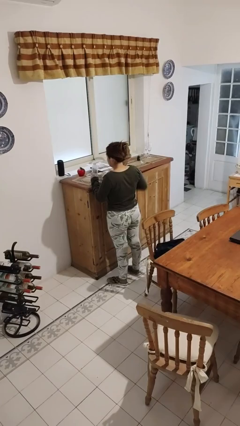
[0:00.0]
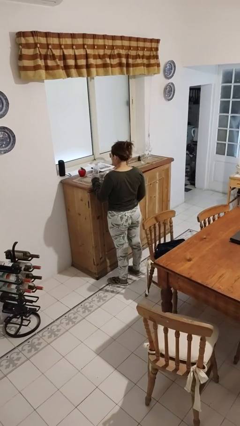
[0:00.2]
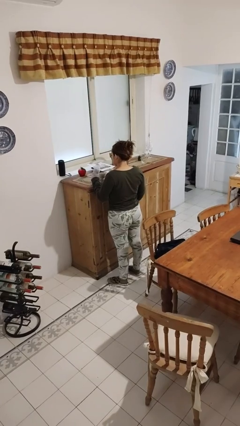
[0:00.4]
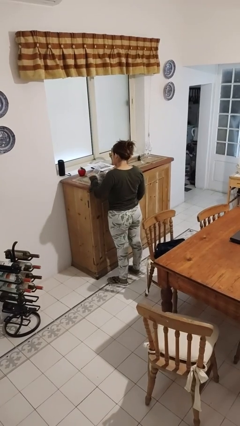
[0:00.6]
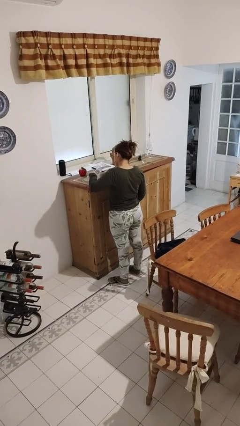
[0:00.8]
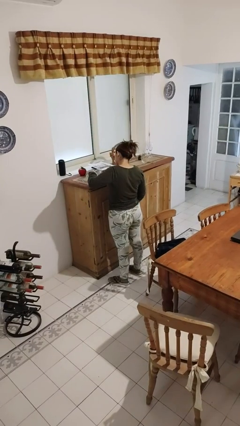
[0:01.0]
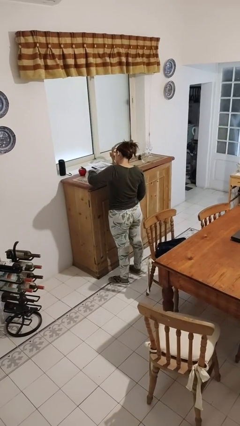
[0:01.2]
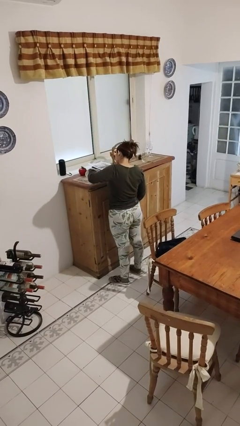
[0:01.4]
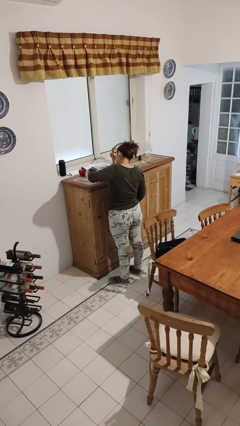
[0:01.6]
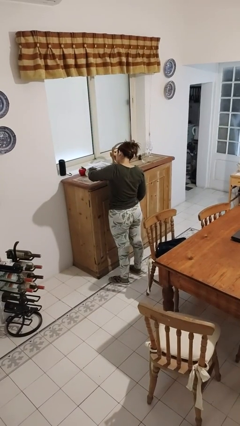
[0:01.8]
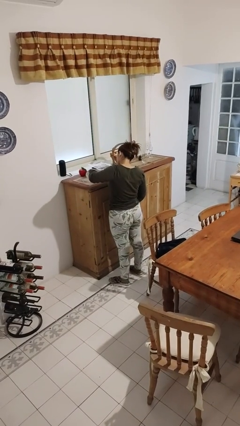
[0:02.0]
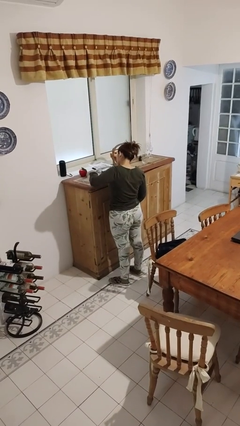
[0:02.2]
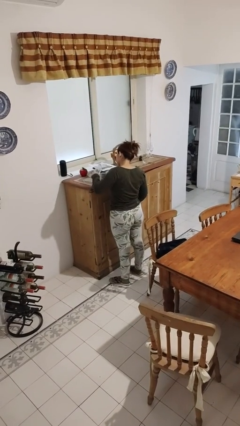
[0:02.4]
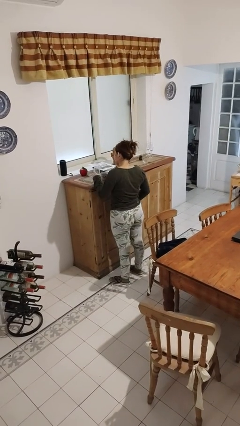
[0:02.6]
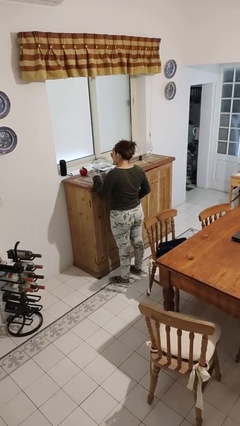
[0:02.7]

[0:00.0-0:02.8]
person pours liquid into cup

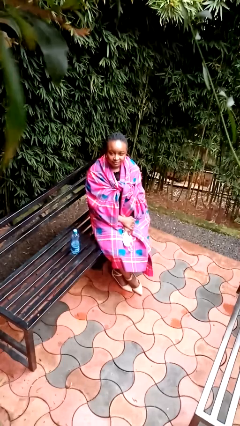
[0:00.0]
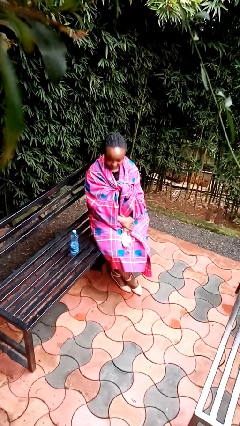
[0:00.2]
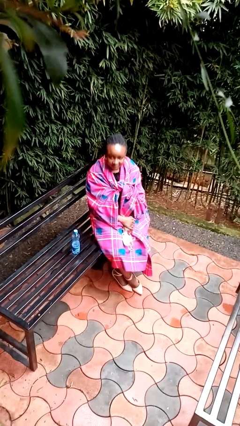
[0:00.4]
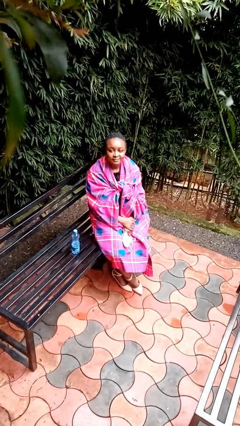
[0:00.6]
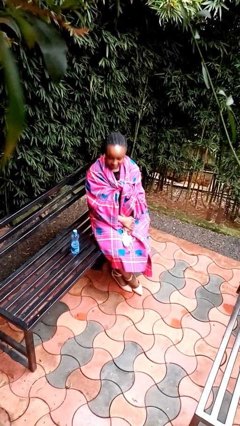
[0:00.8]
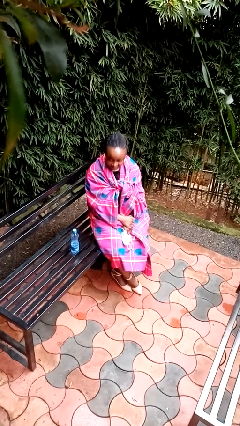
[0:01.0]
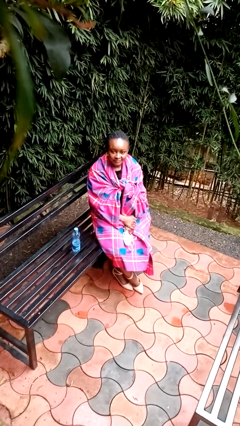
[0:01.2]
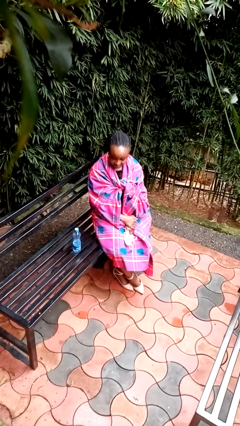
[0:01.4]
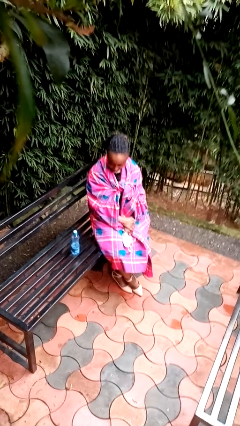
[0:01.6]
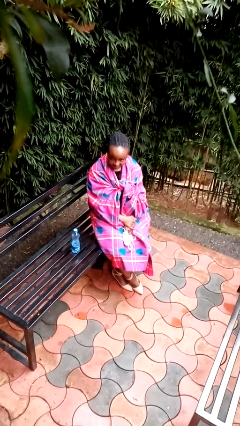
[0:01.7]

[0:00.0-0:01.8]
person nods head

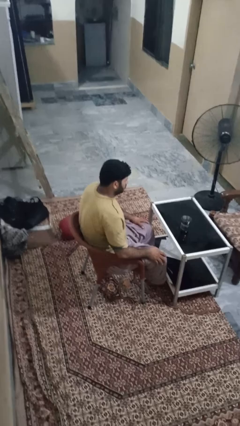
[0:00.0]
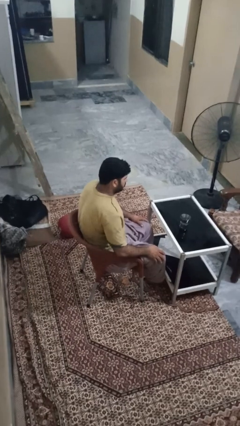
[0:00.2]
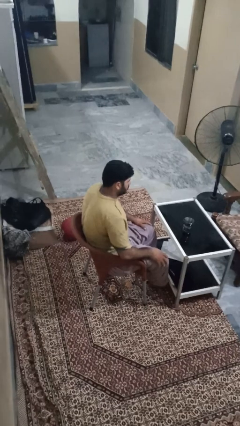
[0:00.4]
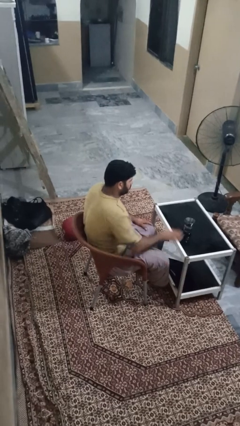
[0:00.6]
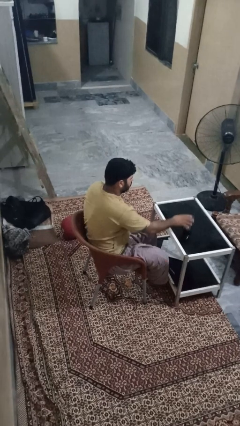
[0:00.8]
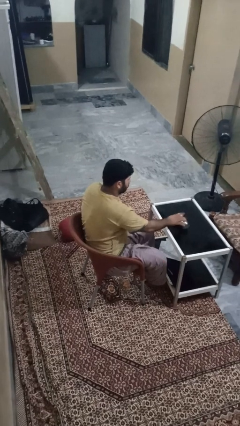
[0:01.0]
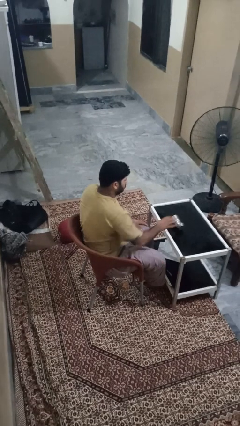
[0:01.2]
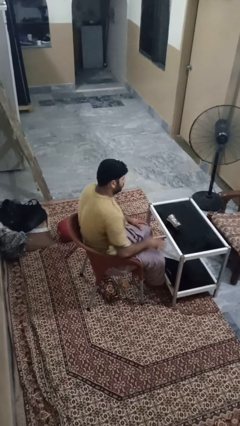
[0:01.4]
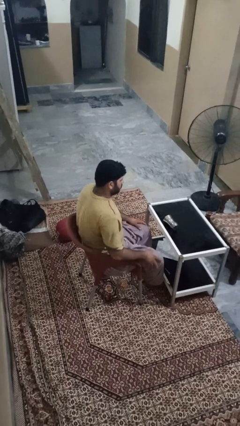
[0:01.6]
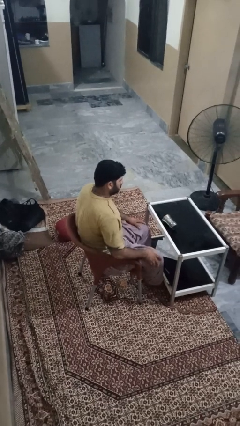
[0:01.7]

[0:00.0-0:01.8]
person knocks over glass

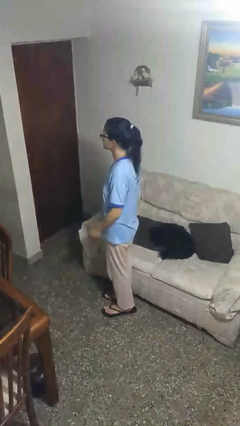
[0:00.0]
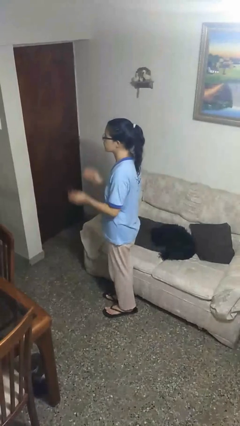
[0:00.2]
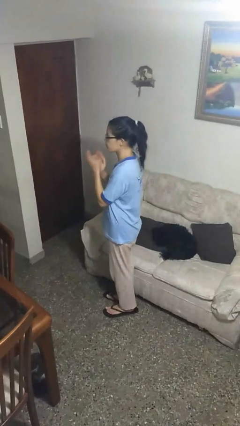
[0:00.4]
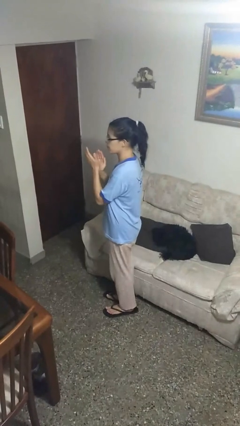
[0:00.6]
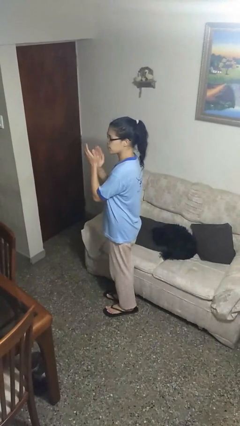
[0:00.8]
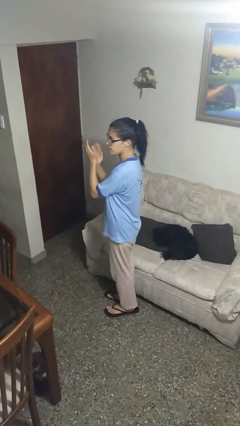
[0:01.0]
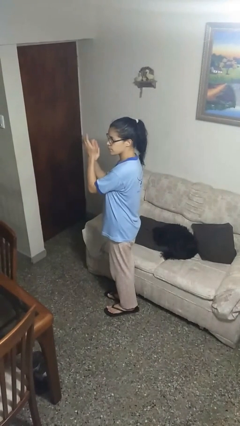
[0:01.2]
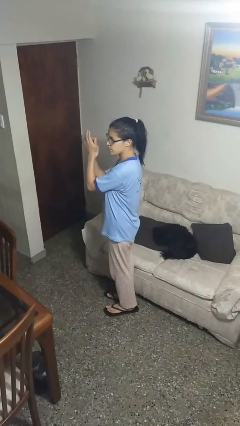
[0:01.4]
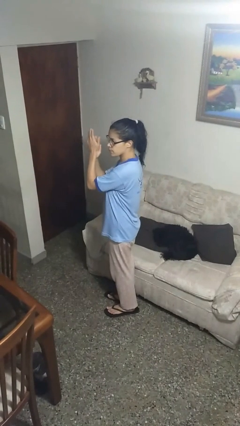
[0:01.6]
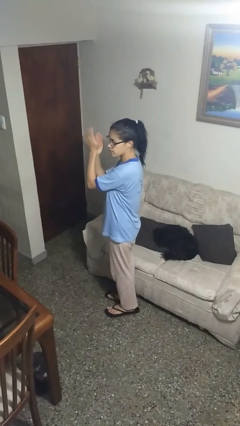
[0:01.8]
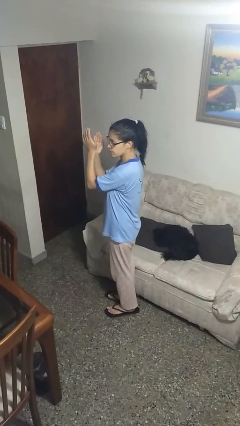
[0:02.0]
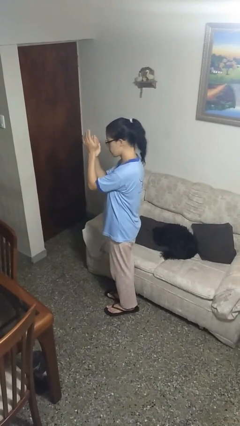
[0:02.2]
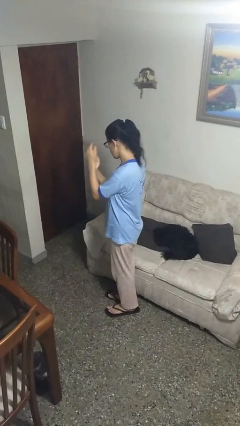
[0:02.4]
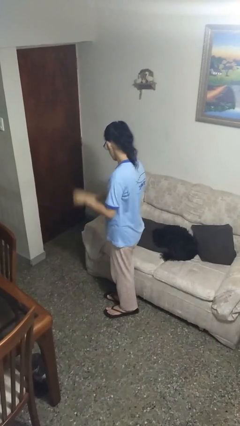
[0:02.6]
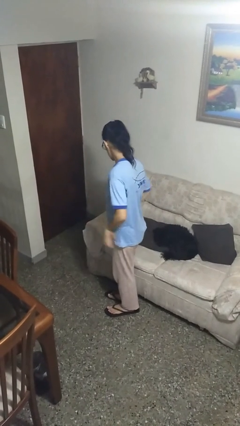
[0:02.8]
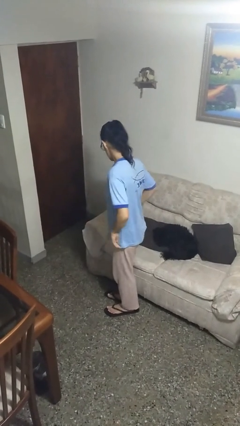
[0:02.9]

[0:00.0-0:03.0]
person claps hands

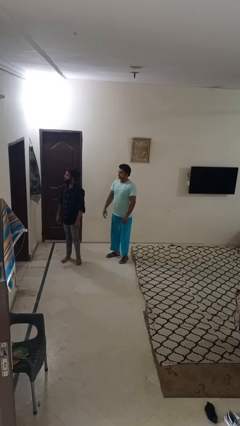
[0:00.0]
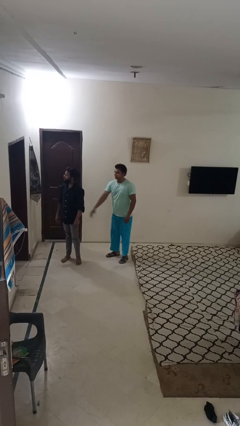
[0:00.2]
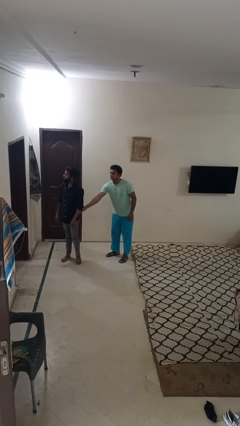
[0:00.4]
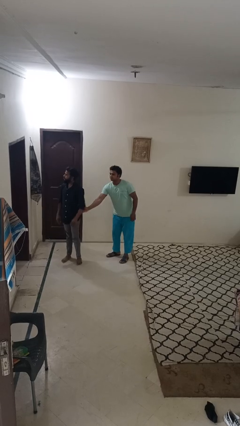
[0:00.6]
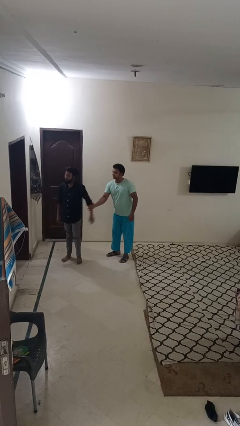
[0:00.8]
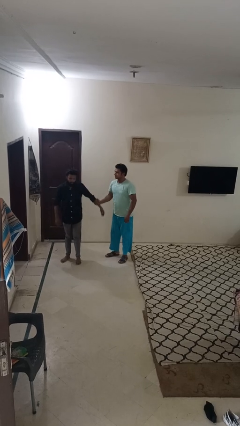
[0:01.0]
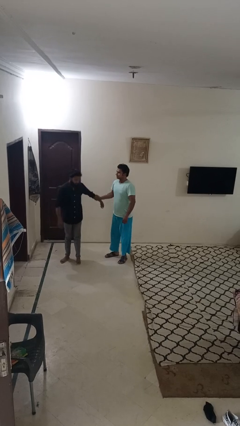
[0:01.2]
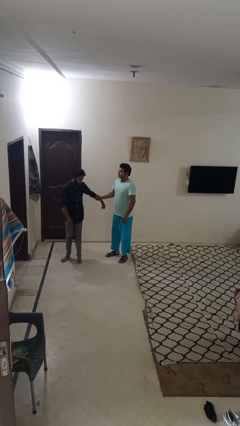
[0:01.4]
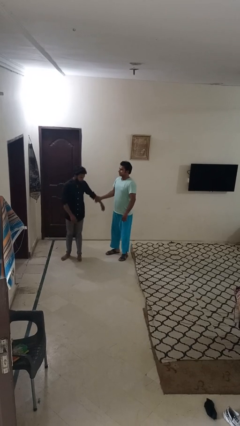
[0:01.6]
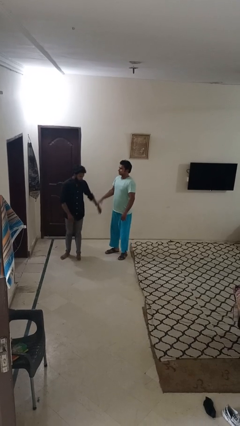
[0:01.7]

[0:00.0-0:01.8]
person grabs person by forearm

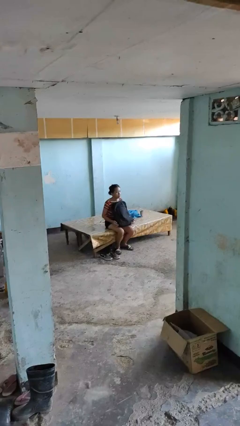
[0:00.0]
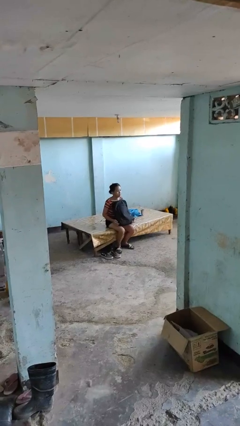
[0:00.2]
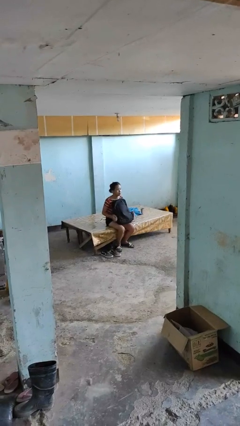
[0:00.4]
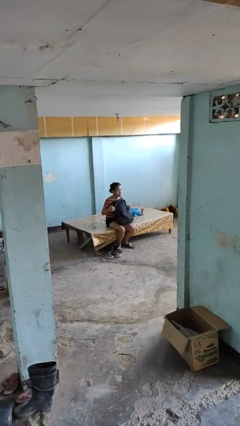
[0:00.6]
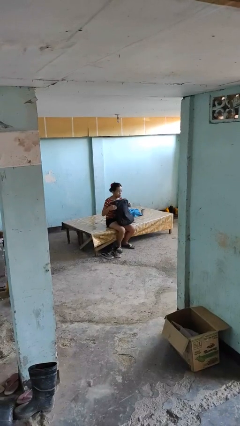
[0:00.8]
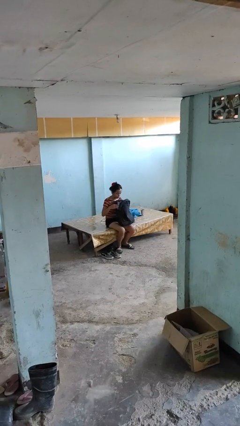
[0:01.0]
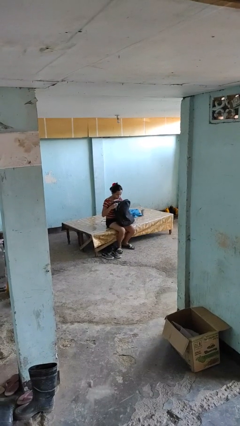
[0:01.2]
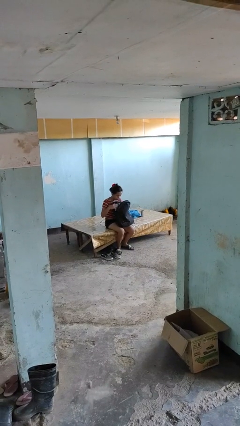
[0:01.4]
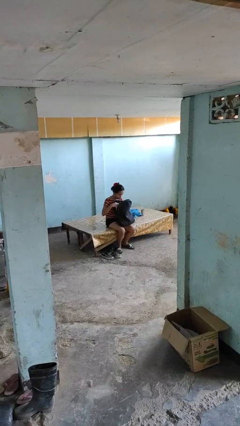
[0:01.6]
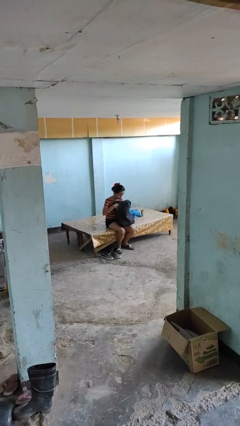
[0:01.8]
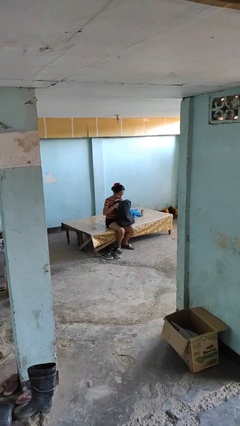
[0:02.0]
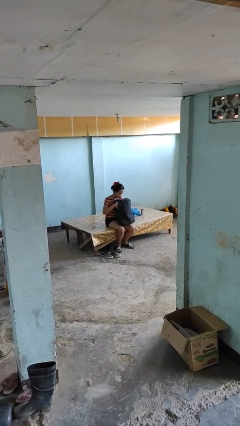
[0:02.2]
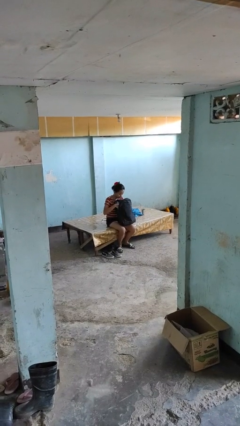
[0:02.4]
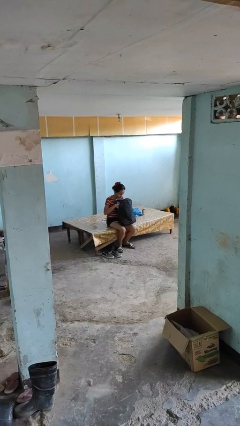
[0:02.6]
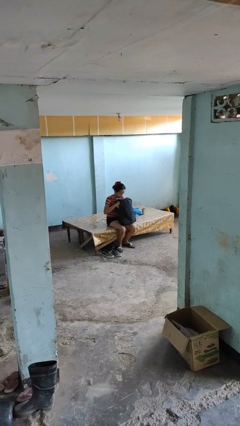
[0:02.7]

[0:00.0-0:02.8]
person searches in backpack

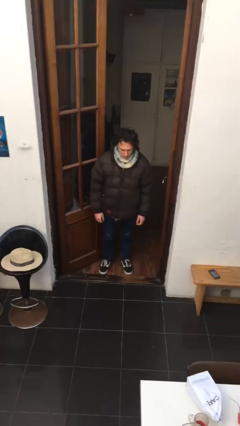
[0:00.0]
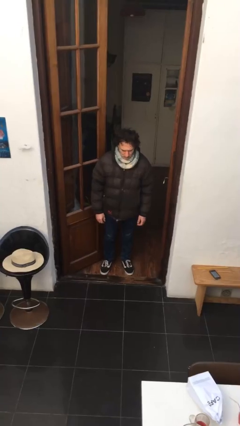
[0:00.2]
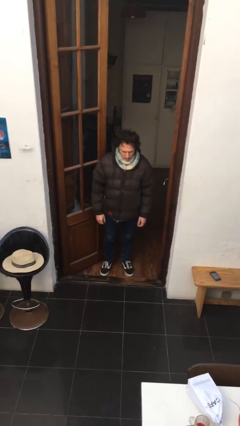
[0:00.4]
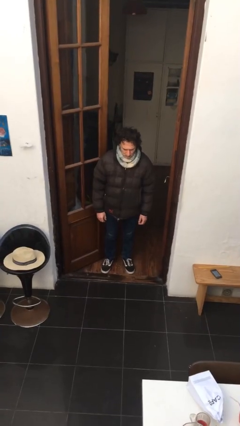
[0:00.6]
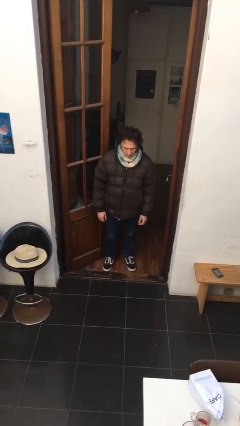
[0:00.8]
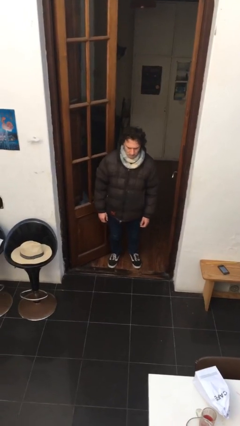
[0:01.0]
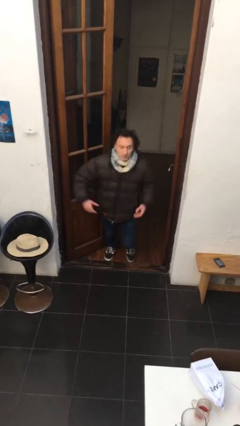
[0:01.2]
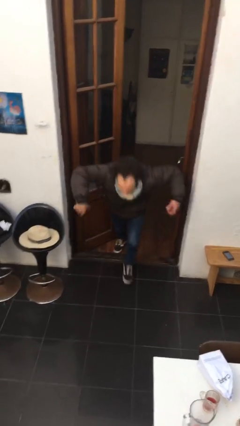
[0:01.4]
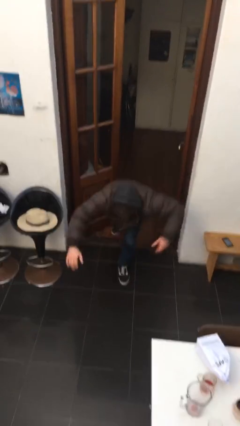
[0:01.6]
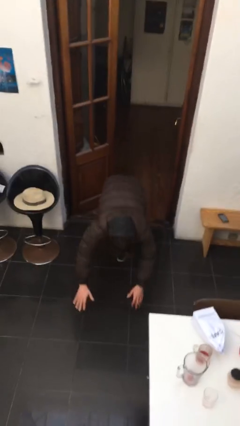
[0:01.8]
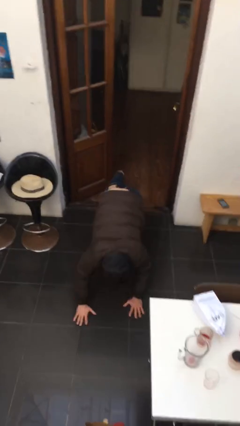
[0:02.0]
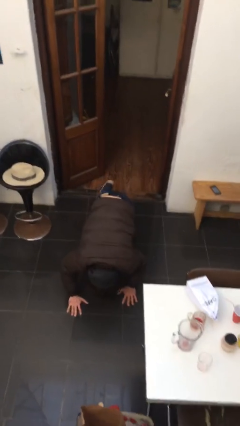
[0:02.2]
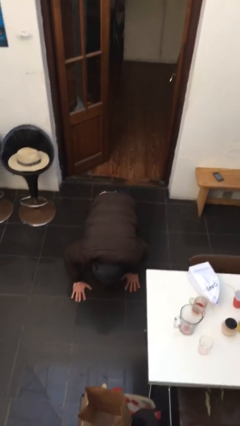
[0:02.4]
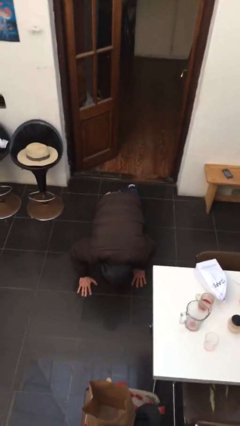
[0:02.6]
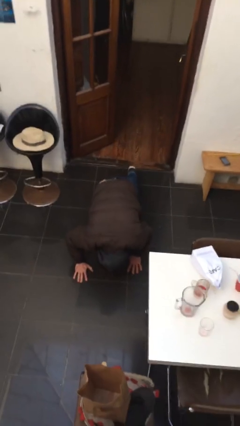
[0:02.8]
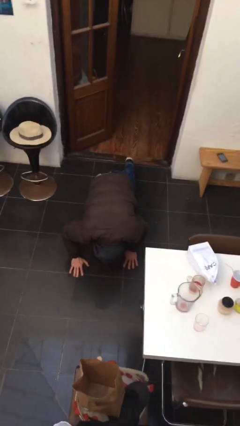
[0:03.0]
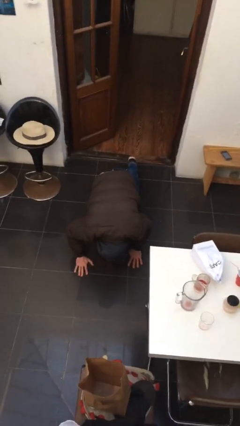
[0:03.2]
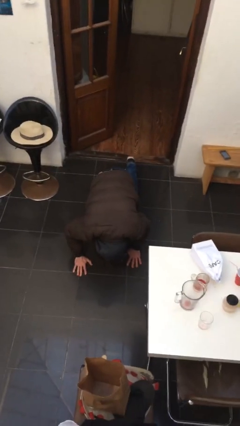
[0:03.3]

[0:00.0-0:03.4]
person trips on object on floor
